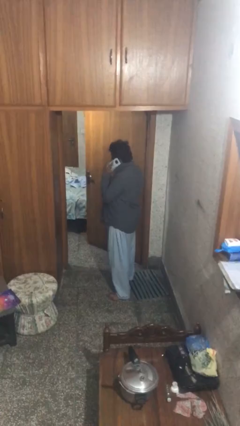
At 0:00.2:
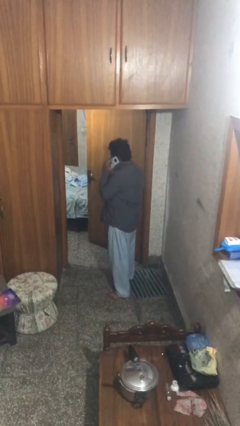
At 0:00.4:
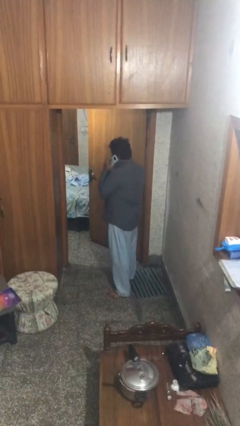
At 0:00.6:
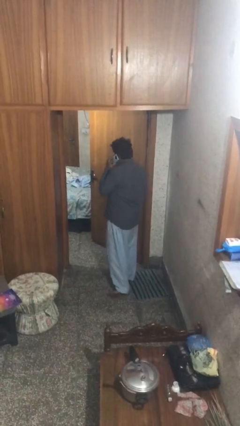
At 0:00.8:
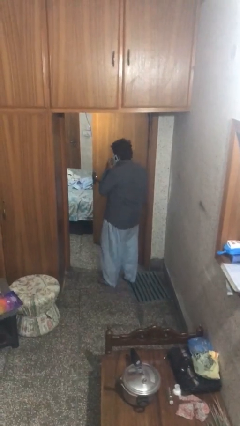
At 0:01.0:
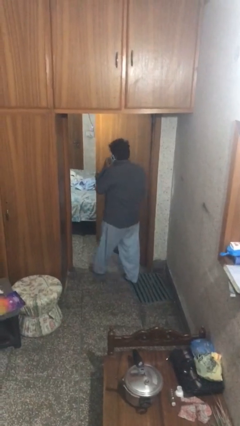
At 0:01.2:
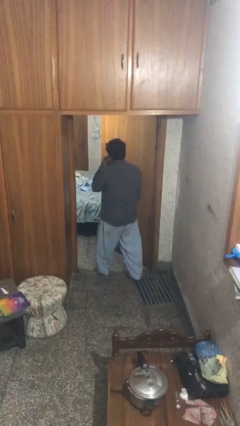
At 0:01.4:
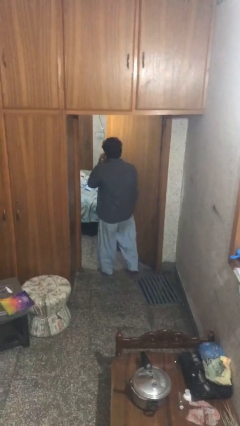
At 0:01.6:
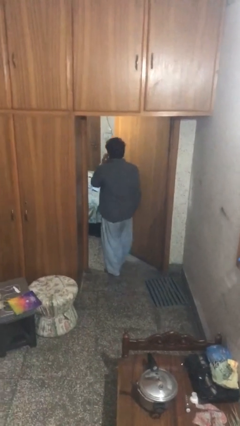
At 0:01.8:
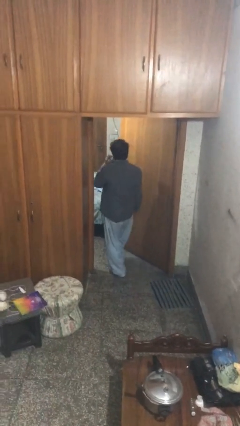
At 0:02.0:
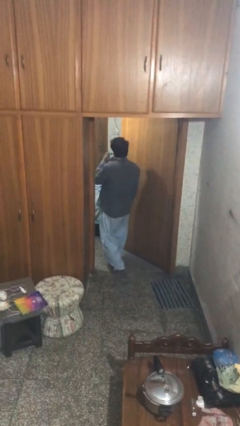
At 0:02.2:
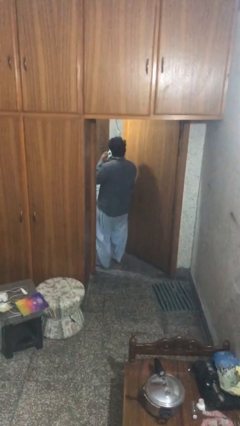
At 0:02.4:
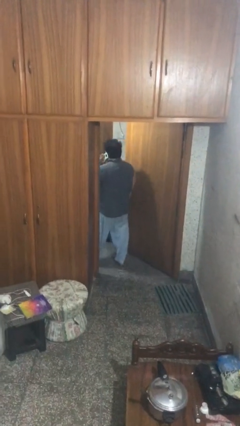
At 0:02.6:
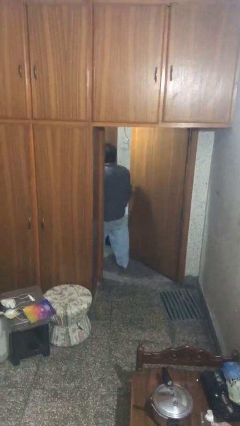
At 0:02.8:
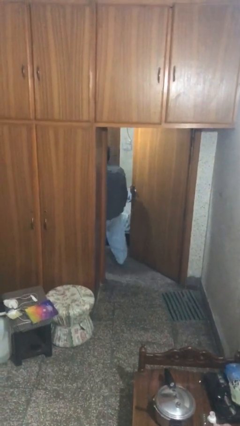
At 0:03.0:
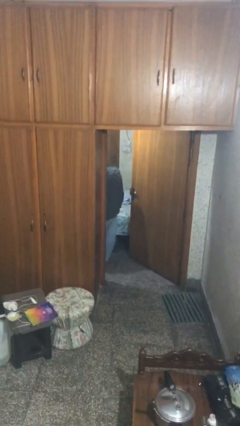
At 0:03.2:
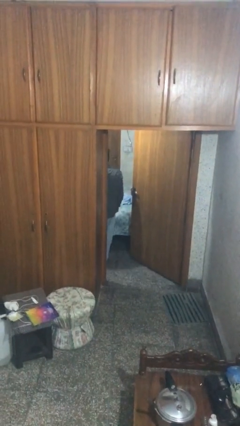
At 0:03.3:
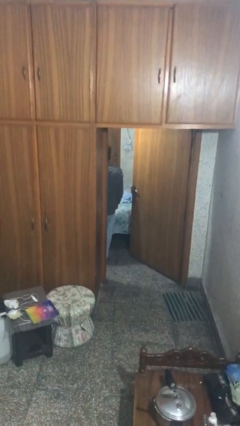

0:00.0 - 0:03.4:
person exits scene through structure

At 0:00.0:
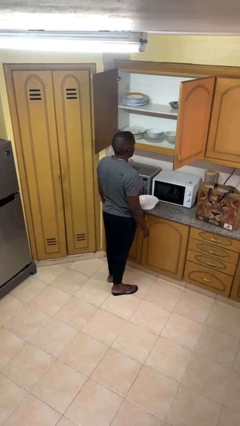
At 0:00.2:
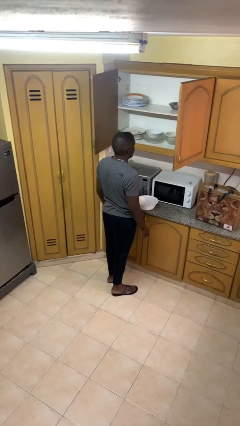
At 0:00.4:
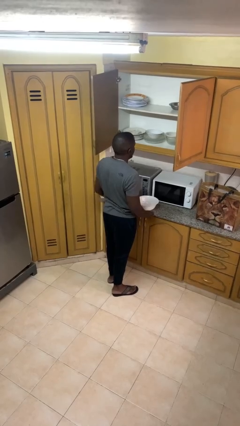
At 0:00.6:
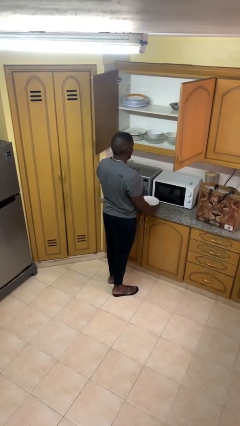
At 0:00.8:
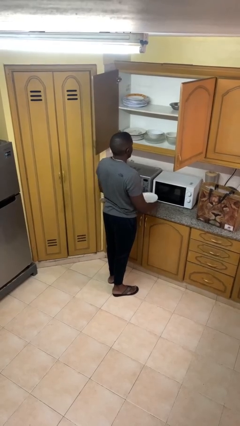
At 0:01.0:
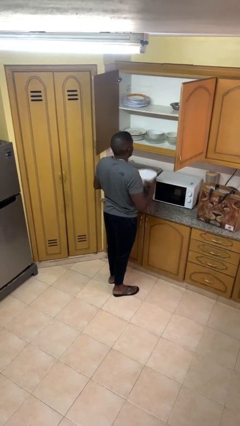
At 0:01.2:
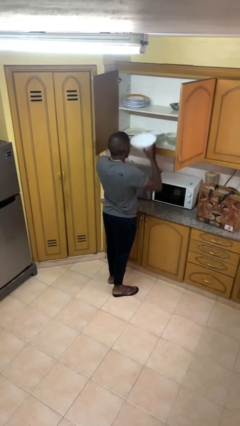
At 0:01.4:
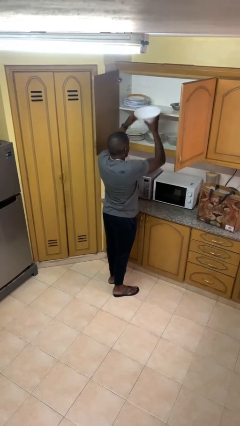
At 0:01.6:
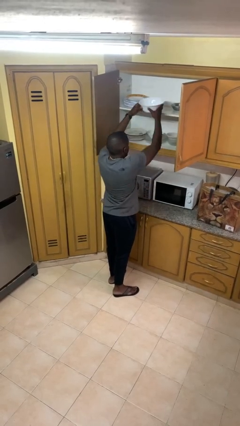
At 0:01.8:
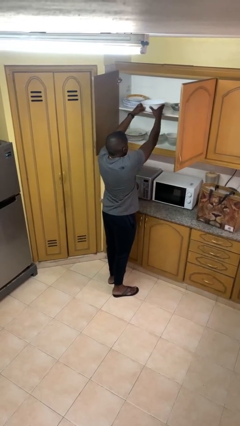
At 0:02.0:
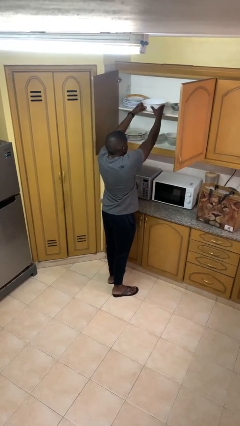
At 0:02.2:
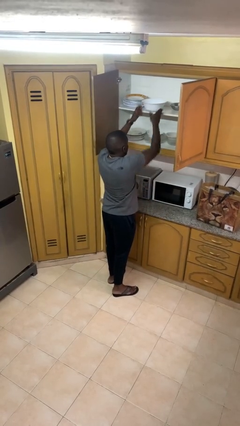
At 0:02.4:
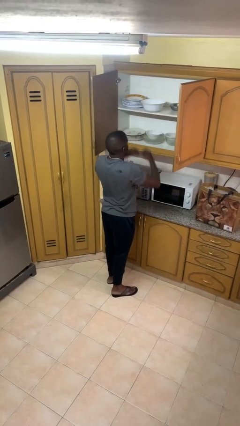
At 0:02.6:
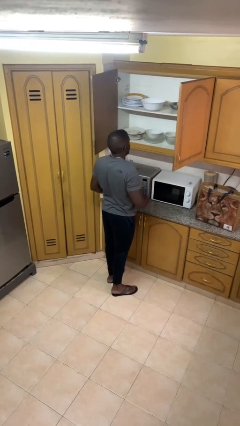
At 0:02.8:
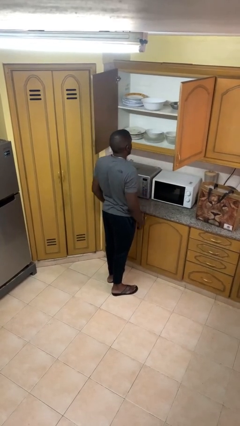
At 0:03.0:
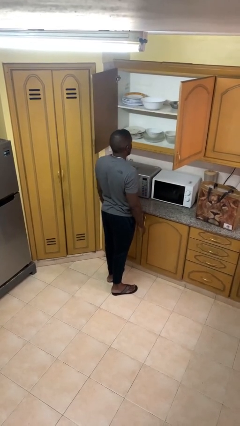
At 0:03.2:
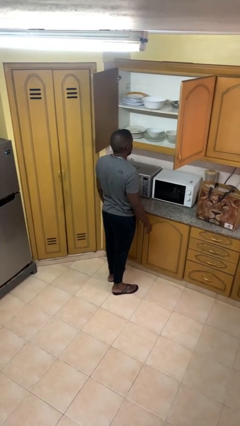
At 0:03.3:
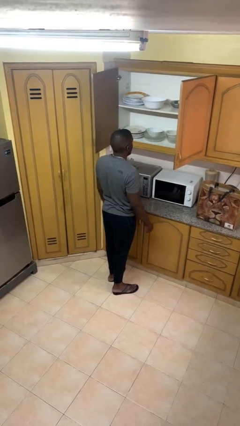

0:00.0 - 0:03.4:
person puts object in cabinet

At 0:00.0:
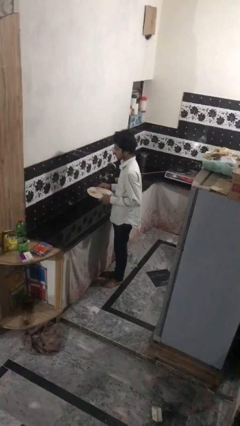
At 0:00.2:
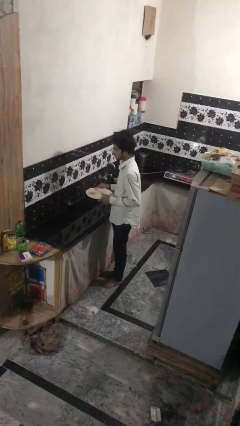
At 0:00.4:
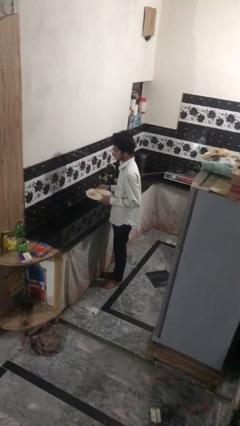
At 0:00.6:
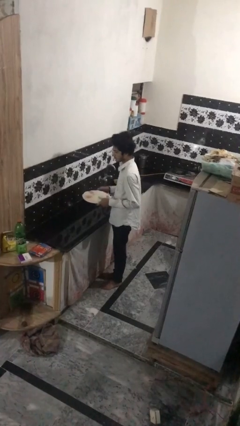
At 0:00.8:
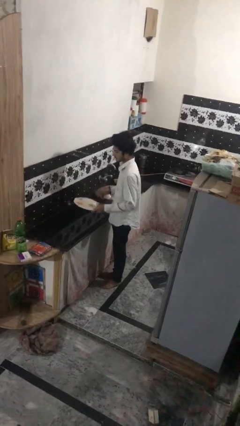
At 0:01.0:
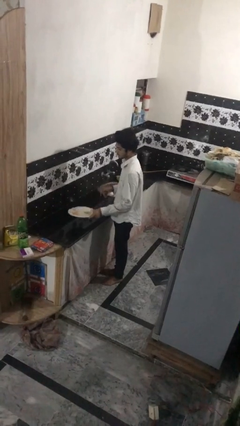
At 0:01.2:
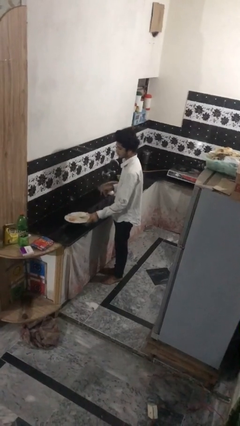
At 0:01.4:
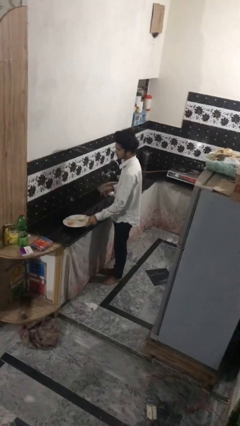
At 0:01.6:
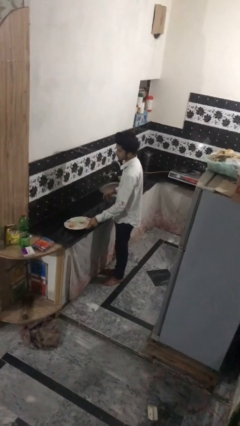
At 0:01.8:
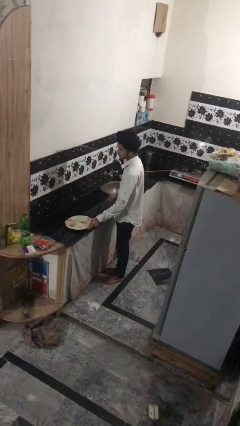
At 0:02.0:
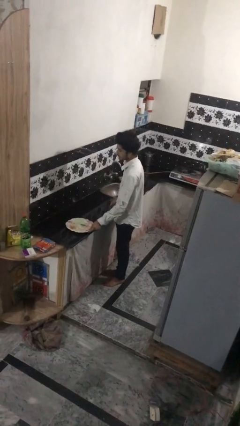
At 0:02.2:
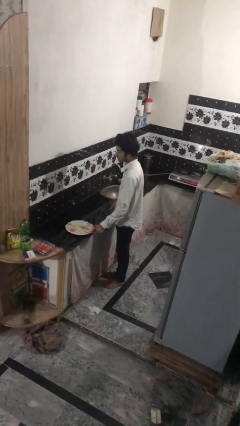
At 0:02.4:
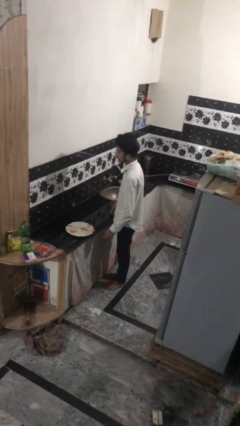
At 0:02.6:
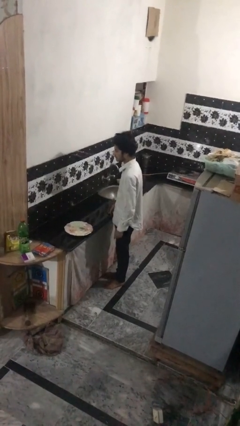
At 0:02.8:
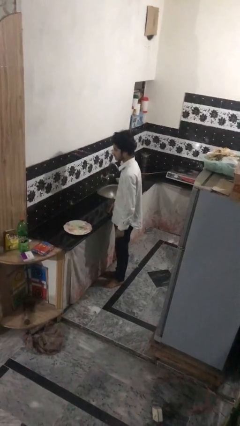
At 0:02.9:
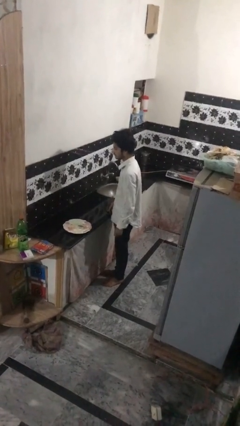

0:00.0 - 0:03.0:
person puts down object on countertop

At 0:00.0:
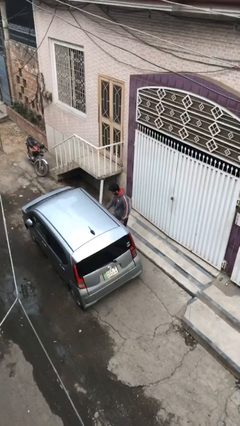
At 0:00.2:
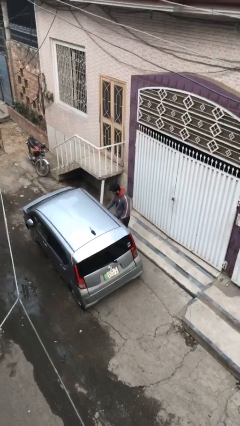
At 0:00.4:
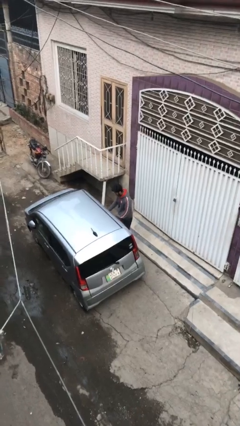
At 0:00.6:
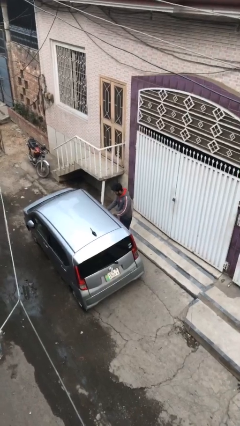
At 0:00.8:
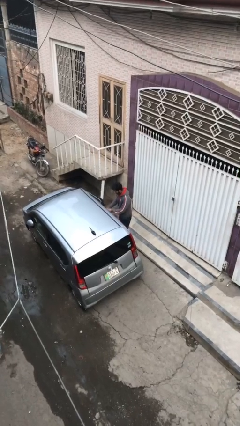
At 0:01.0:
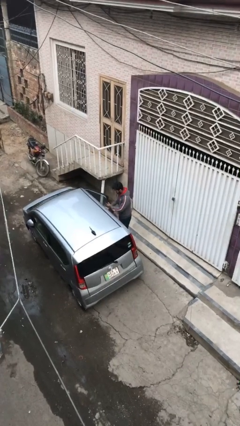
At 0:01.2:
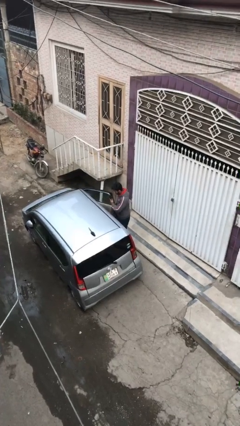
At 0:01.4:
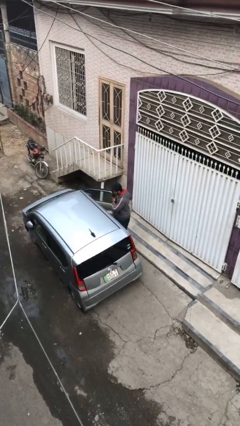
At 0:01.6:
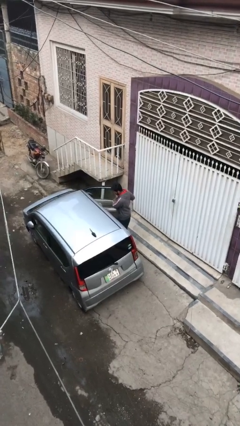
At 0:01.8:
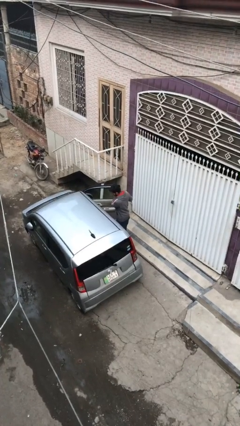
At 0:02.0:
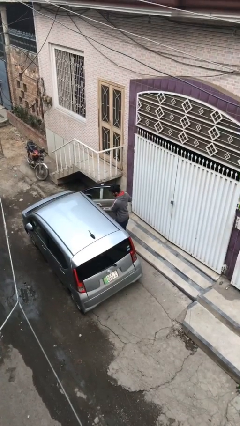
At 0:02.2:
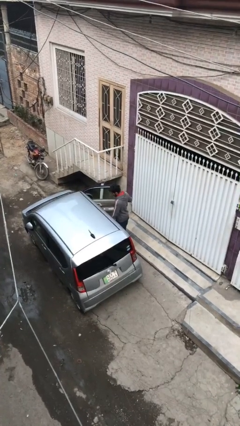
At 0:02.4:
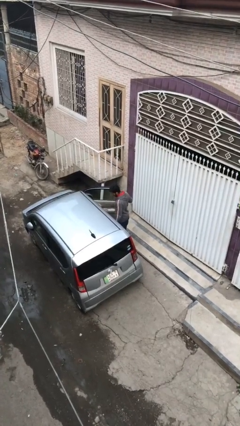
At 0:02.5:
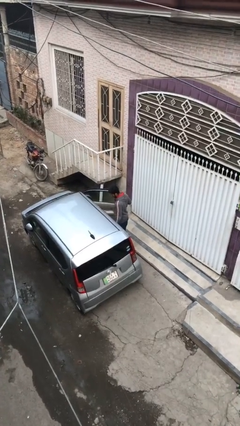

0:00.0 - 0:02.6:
person opens car door

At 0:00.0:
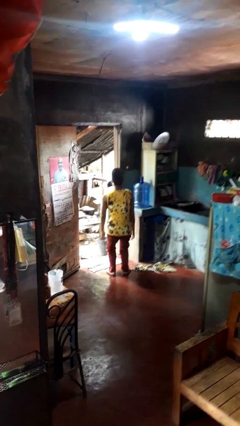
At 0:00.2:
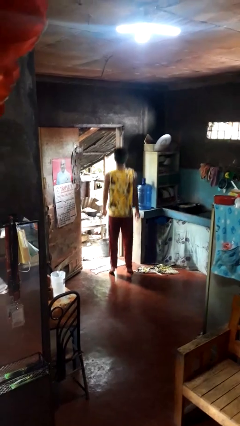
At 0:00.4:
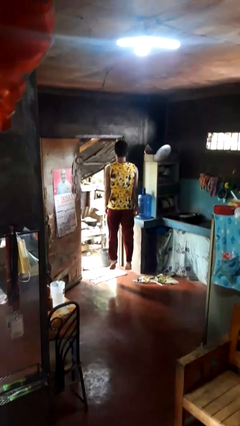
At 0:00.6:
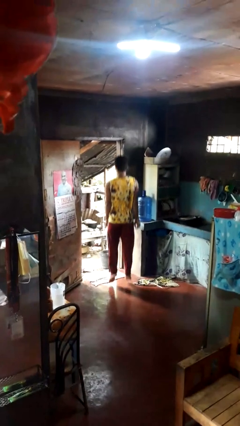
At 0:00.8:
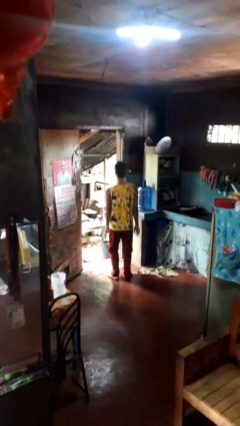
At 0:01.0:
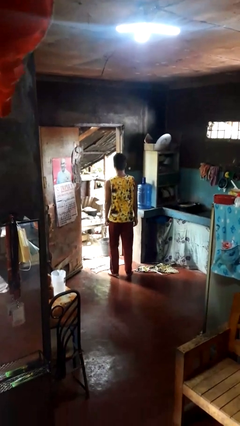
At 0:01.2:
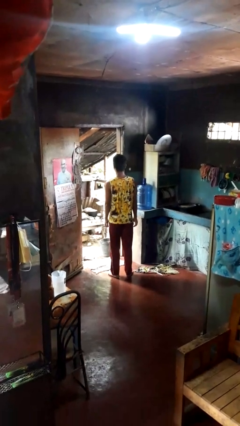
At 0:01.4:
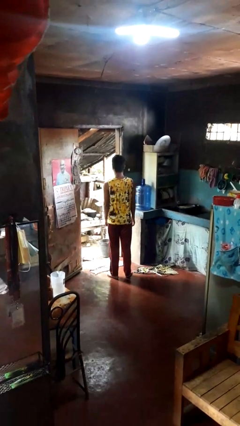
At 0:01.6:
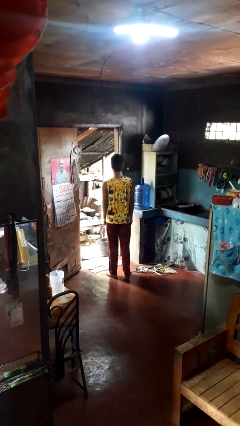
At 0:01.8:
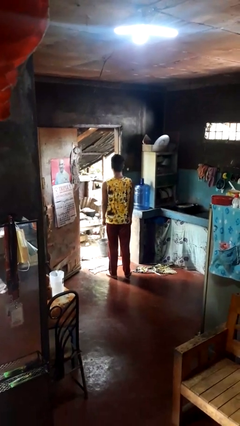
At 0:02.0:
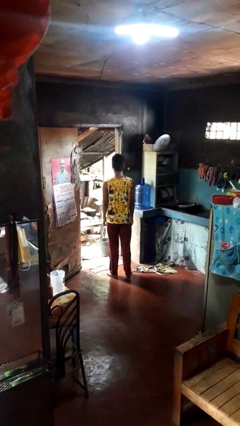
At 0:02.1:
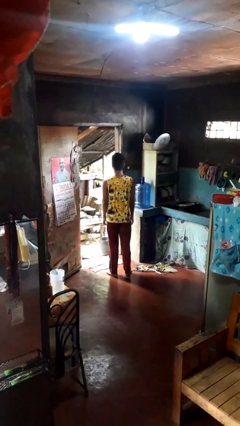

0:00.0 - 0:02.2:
person jumps

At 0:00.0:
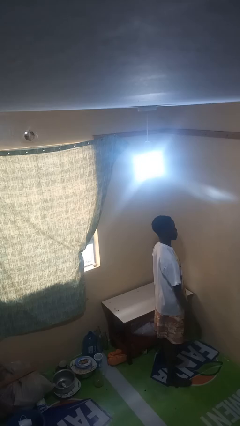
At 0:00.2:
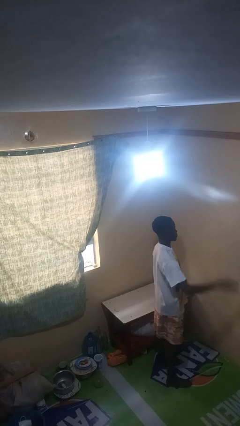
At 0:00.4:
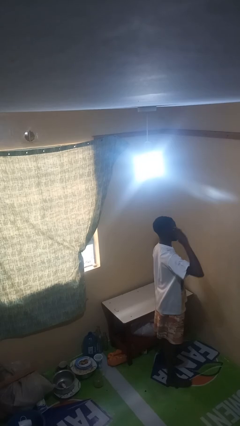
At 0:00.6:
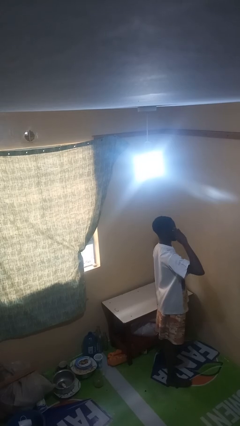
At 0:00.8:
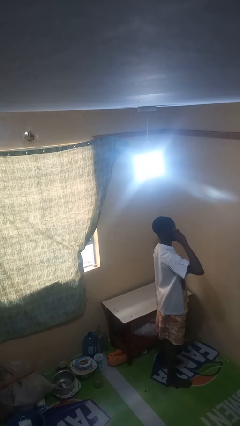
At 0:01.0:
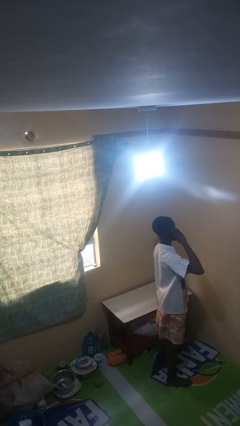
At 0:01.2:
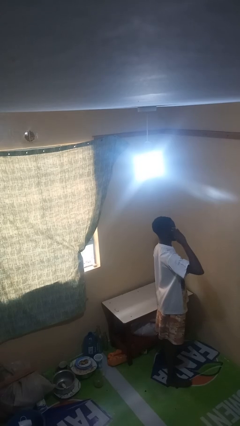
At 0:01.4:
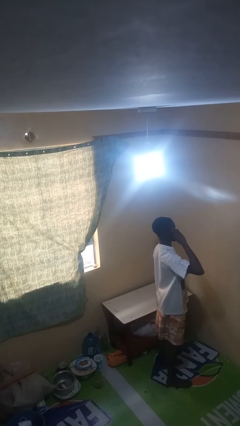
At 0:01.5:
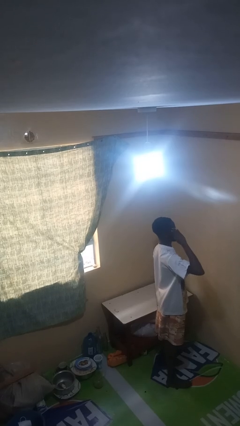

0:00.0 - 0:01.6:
person salutes

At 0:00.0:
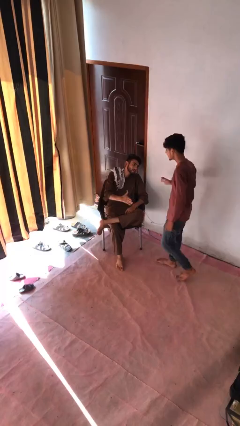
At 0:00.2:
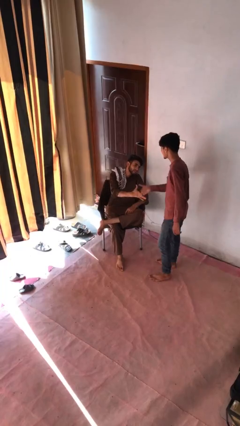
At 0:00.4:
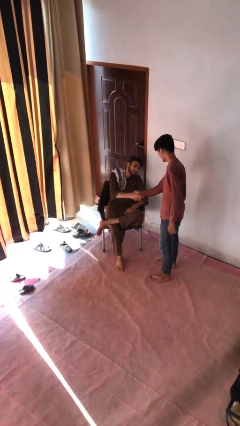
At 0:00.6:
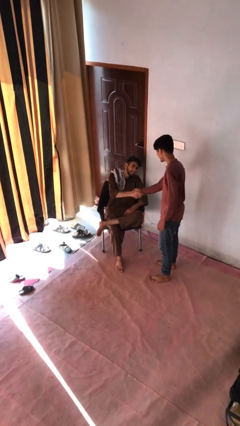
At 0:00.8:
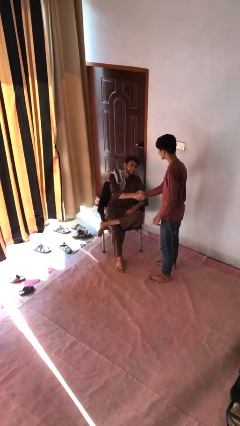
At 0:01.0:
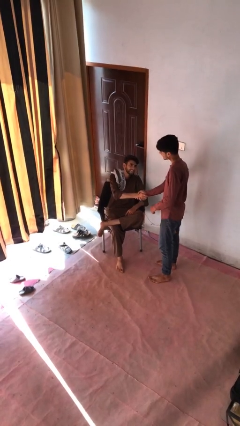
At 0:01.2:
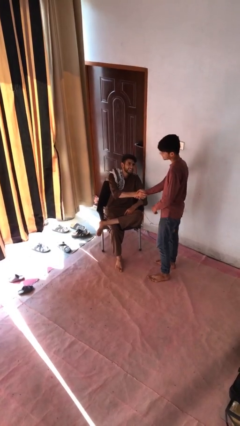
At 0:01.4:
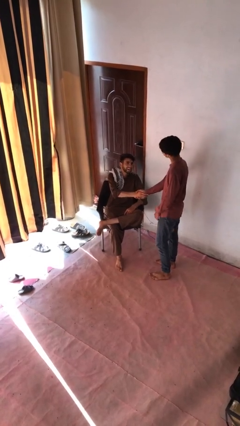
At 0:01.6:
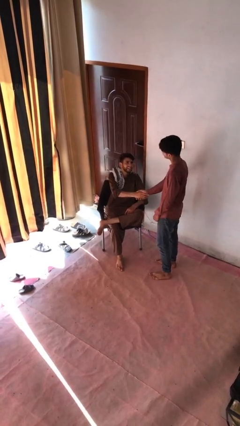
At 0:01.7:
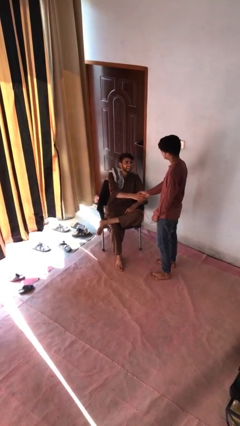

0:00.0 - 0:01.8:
person shakes hand
